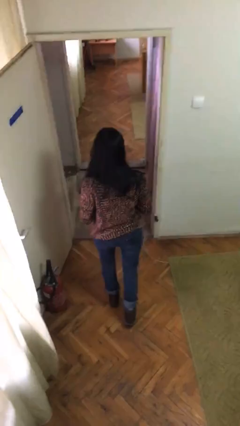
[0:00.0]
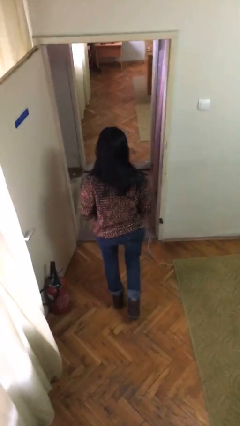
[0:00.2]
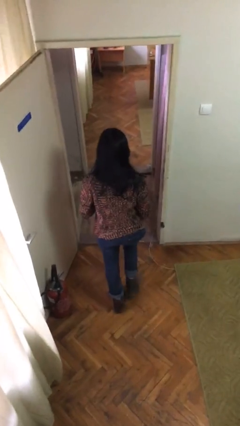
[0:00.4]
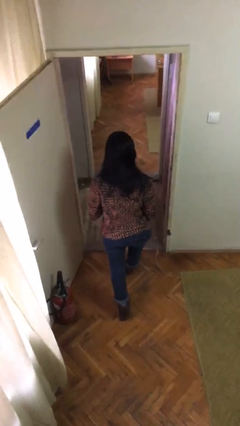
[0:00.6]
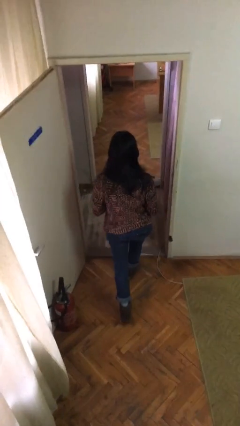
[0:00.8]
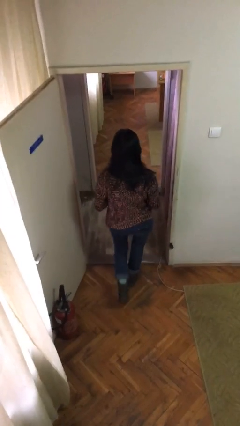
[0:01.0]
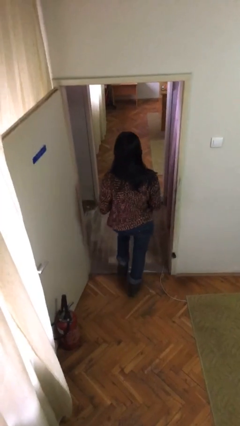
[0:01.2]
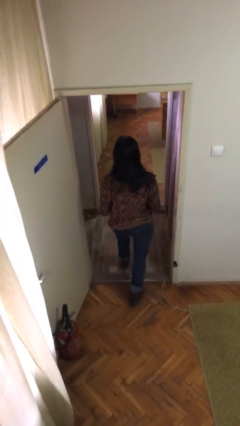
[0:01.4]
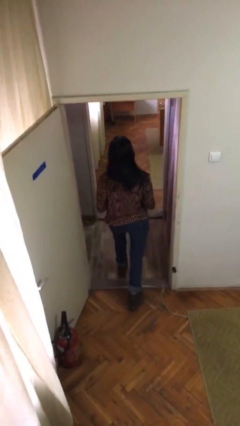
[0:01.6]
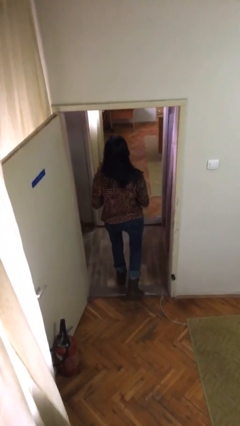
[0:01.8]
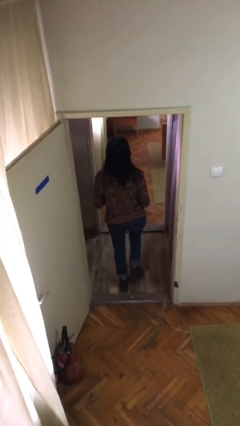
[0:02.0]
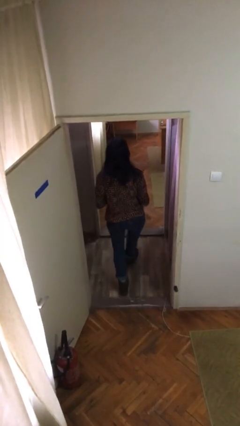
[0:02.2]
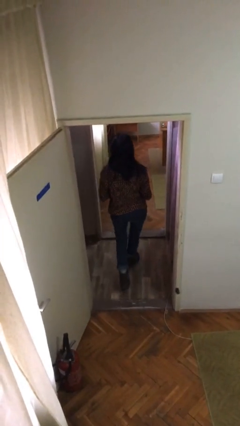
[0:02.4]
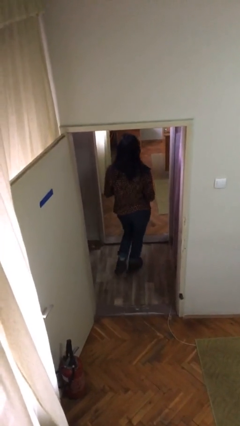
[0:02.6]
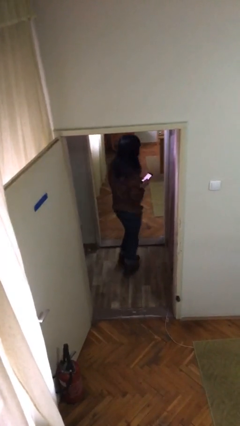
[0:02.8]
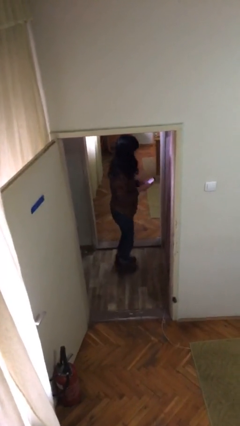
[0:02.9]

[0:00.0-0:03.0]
person exits scene through structure

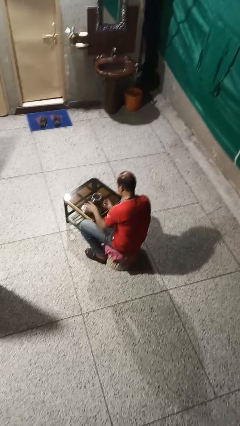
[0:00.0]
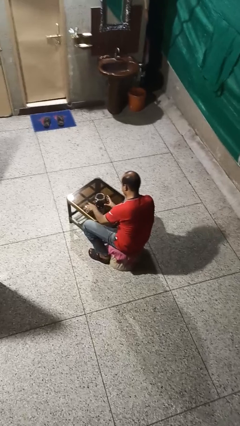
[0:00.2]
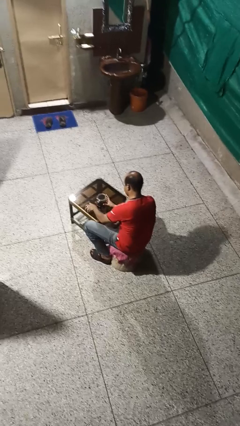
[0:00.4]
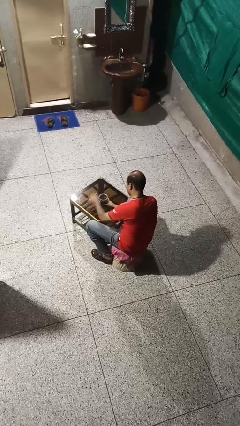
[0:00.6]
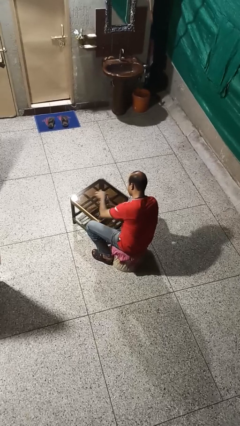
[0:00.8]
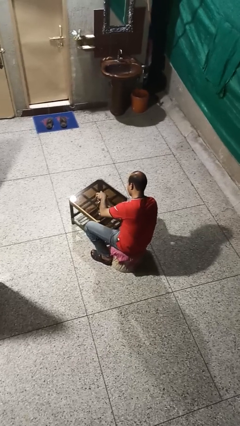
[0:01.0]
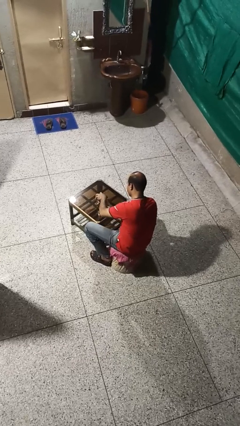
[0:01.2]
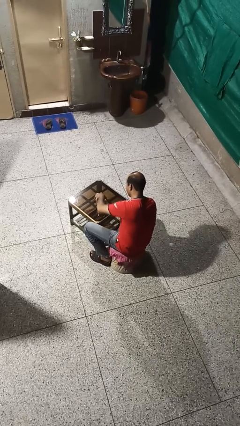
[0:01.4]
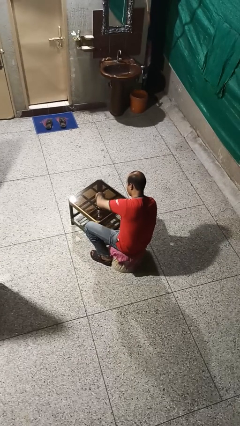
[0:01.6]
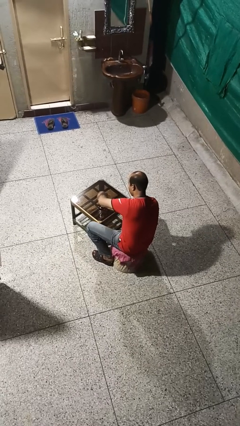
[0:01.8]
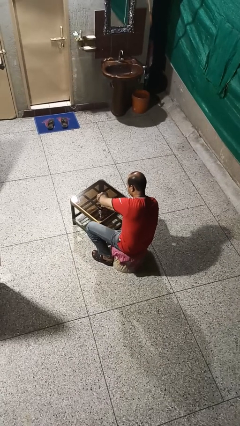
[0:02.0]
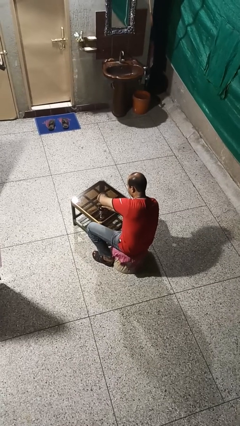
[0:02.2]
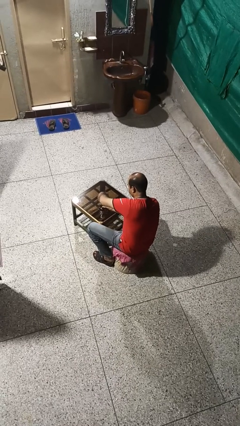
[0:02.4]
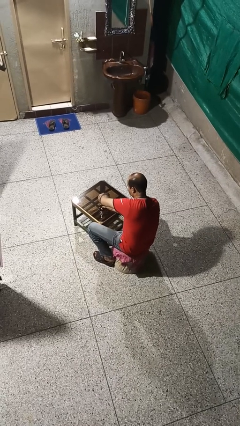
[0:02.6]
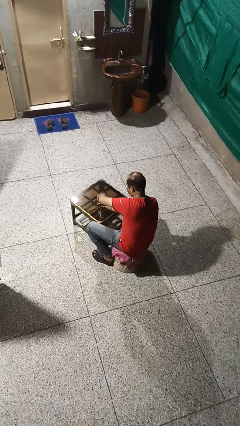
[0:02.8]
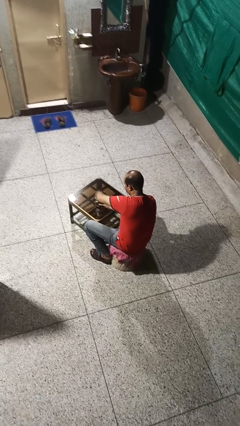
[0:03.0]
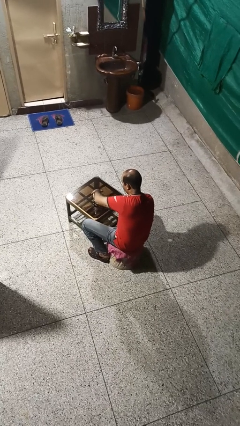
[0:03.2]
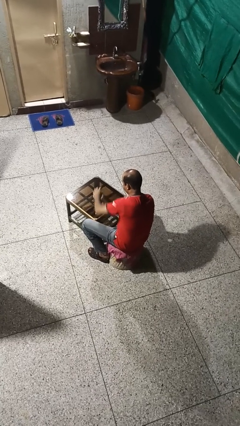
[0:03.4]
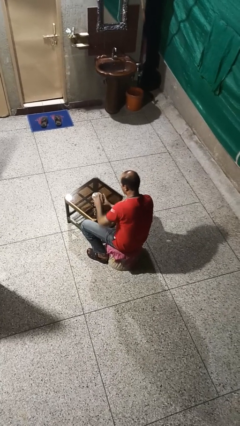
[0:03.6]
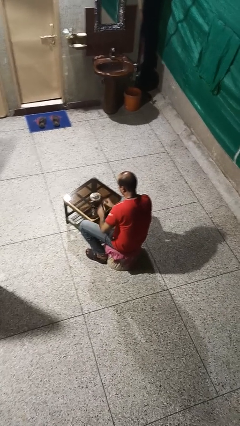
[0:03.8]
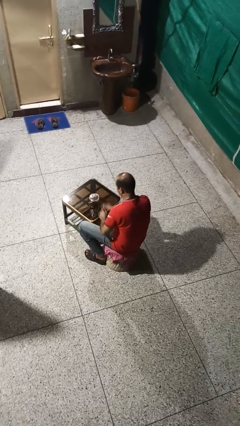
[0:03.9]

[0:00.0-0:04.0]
person closes jar

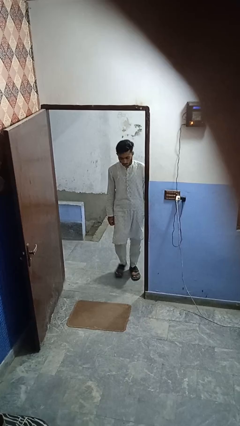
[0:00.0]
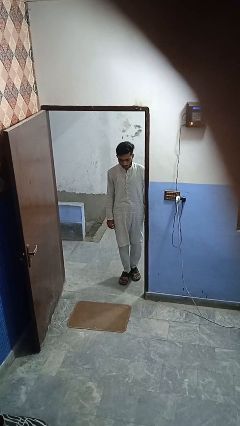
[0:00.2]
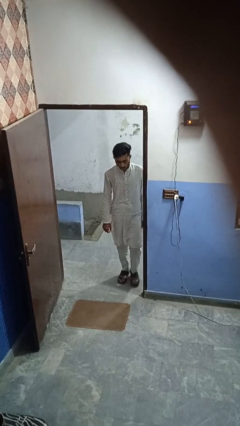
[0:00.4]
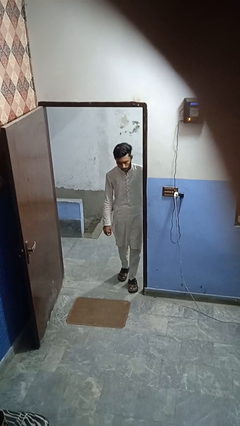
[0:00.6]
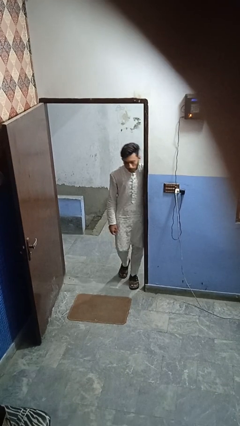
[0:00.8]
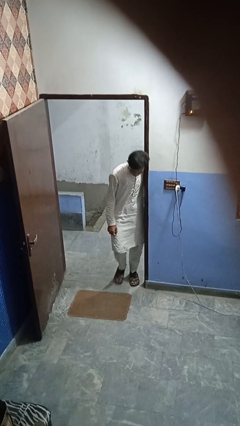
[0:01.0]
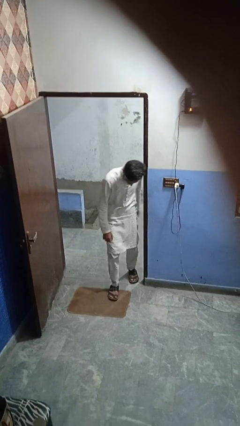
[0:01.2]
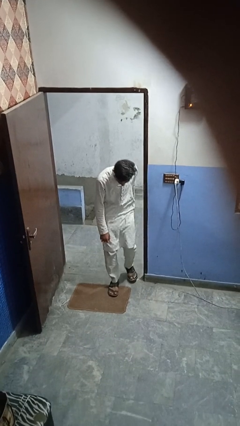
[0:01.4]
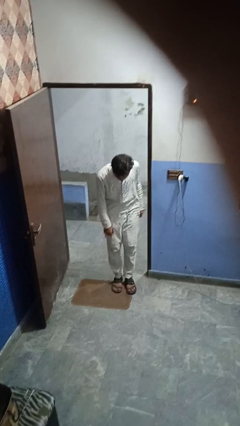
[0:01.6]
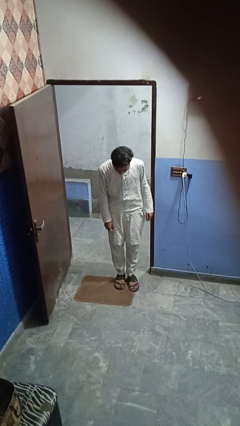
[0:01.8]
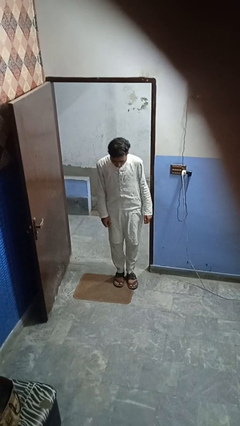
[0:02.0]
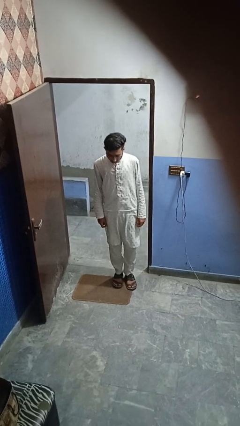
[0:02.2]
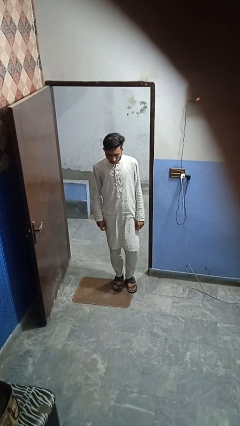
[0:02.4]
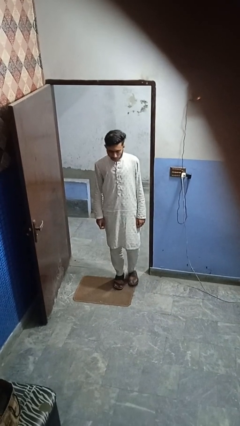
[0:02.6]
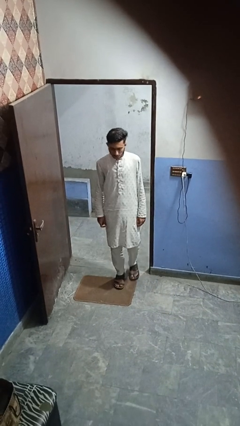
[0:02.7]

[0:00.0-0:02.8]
person bumps into wall

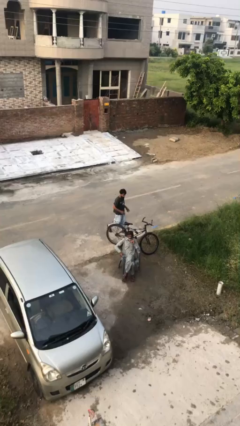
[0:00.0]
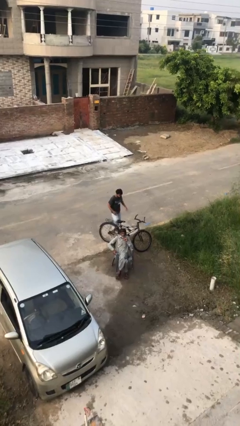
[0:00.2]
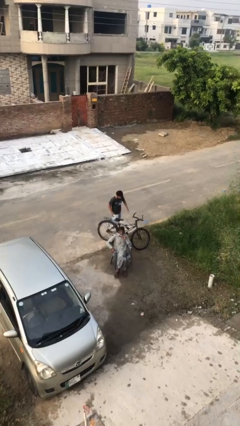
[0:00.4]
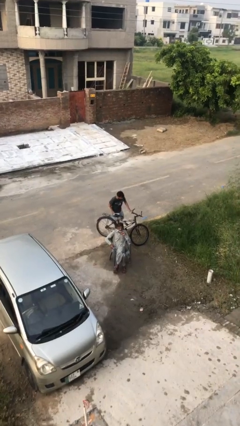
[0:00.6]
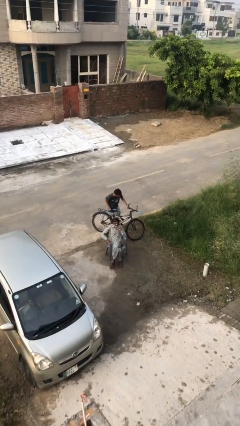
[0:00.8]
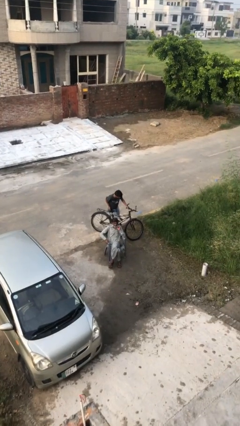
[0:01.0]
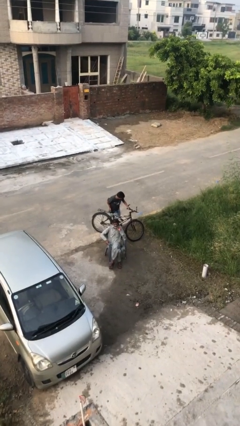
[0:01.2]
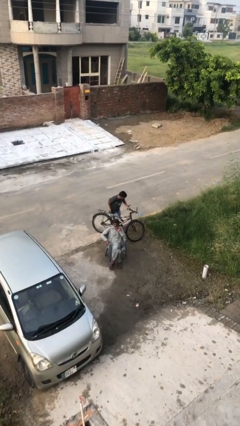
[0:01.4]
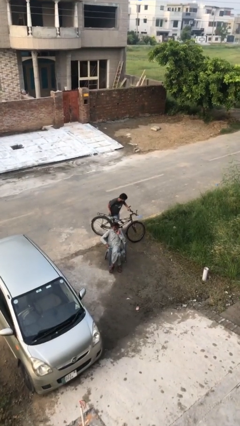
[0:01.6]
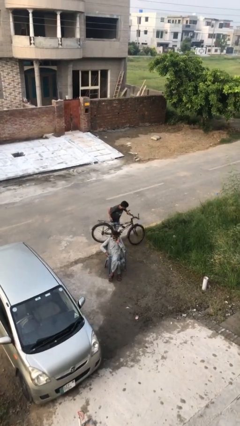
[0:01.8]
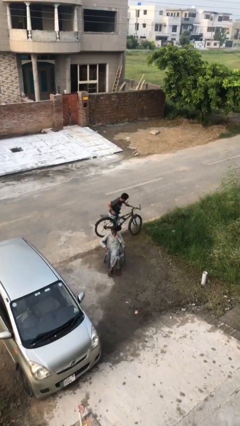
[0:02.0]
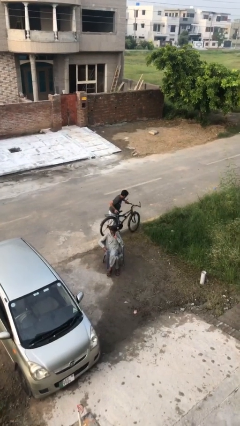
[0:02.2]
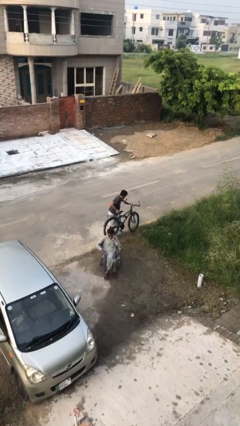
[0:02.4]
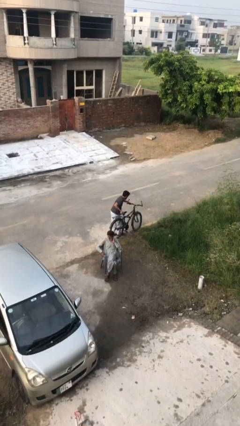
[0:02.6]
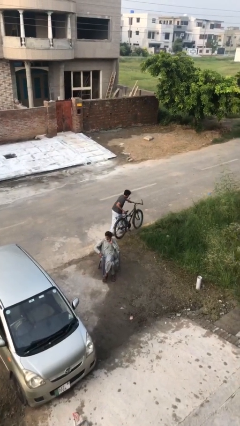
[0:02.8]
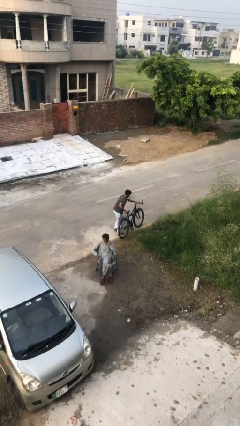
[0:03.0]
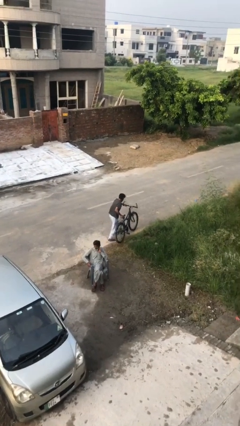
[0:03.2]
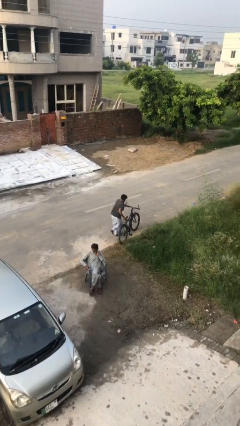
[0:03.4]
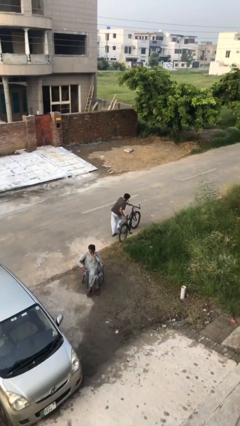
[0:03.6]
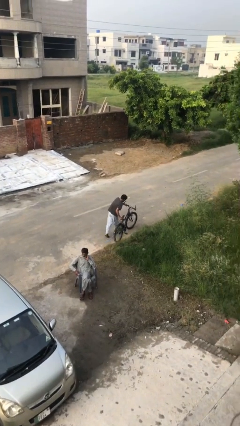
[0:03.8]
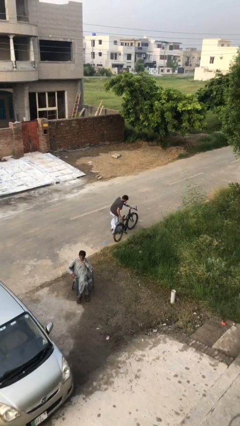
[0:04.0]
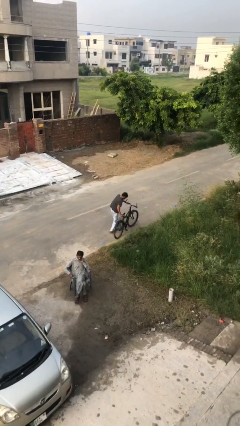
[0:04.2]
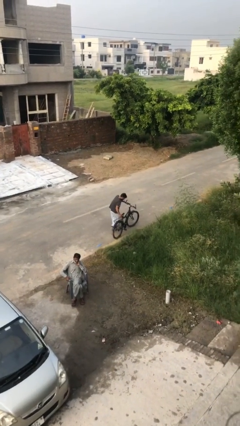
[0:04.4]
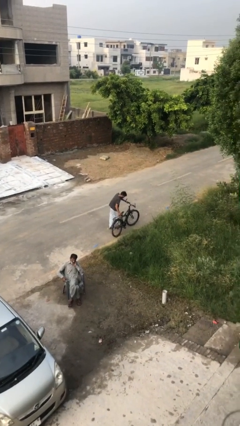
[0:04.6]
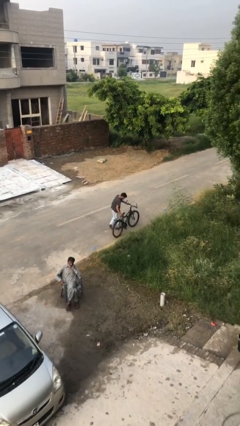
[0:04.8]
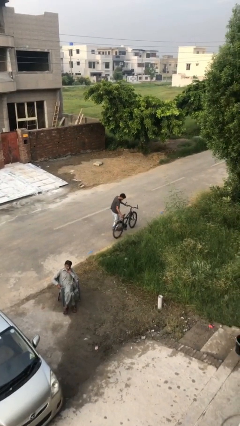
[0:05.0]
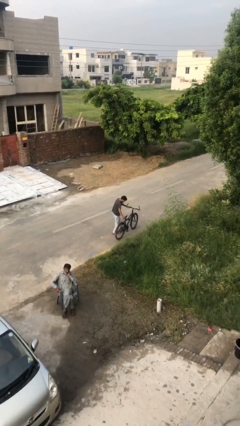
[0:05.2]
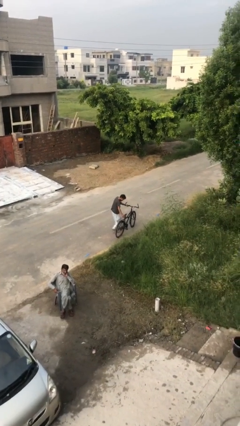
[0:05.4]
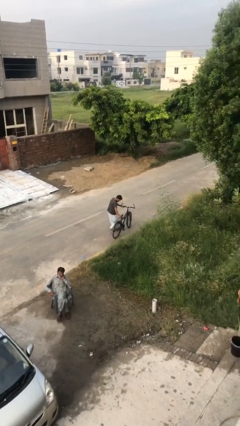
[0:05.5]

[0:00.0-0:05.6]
person steals object from person

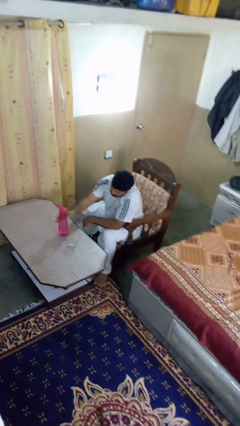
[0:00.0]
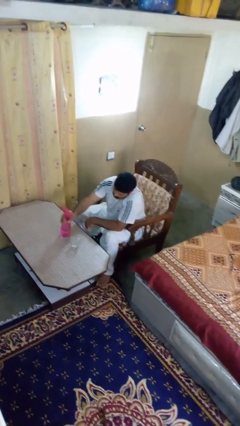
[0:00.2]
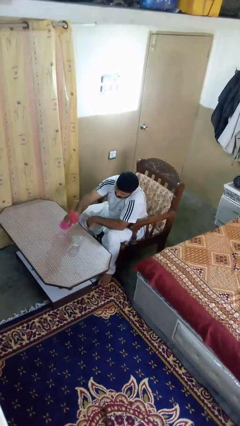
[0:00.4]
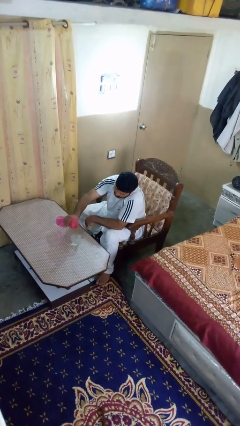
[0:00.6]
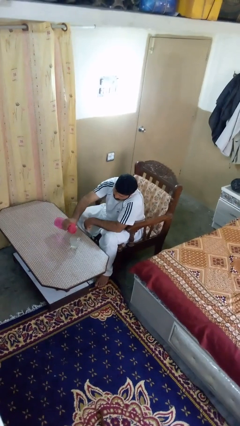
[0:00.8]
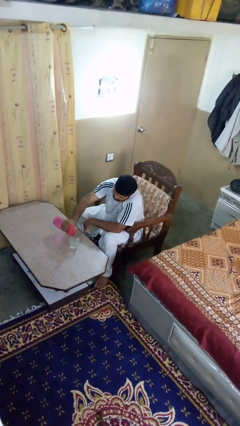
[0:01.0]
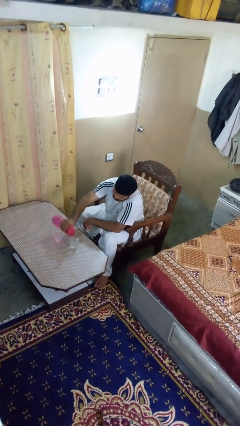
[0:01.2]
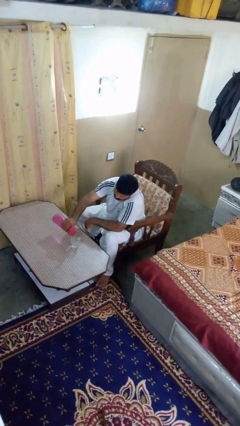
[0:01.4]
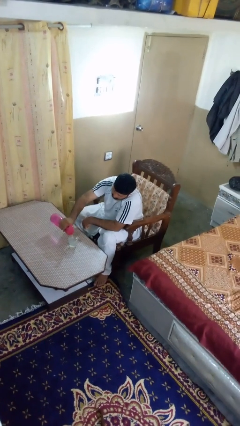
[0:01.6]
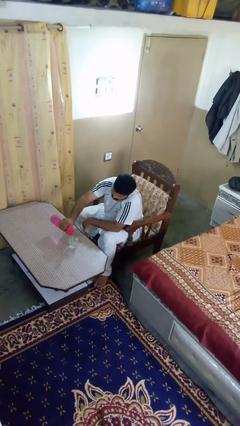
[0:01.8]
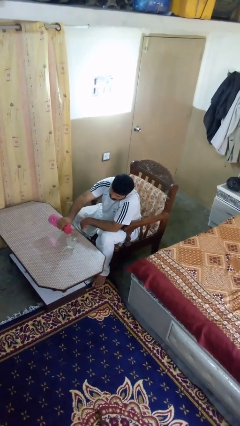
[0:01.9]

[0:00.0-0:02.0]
person pours liquid into cup

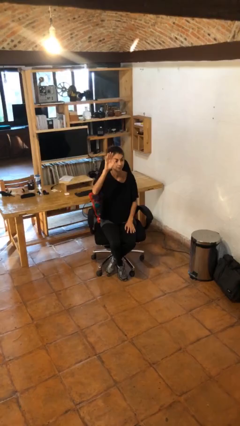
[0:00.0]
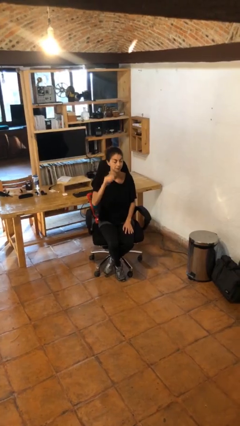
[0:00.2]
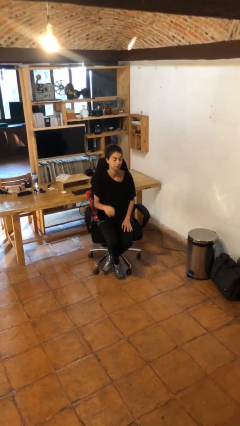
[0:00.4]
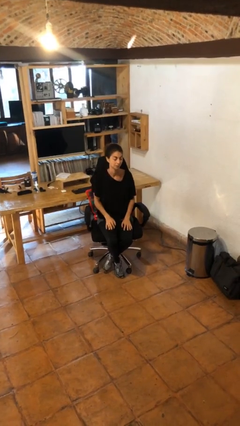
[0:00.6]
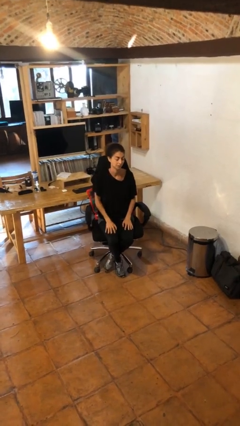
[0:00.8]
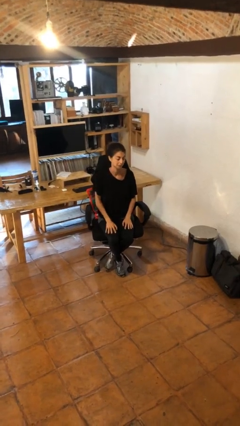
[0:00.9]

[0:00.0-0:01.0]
person gestures lower hand
